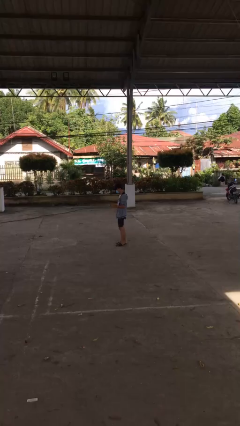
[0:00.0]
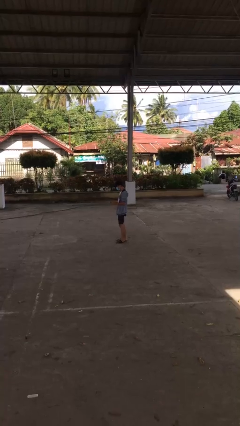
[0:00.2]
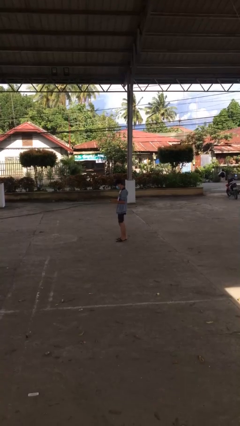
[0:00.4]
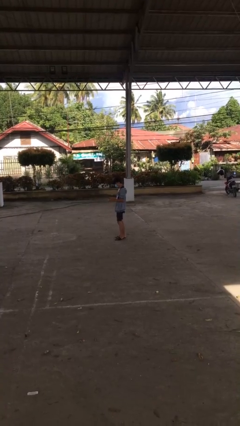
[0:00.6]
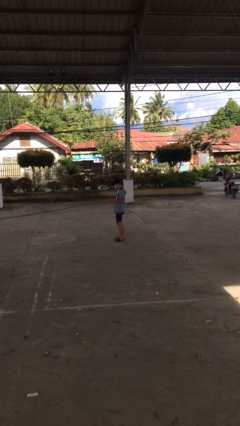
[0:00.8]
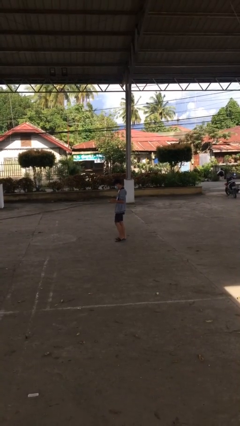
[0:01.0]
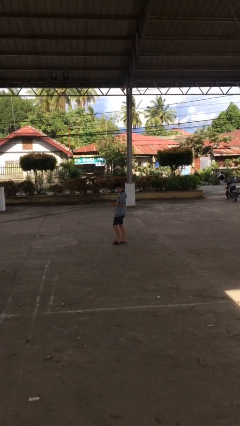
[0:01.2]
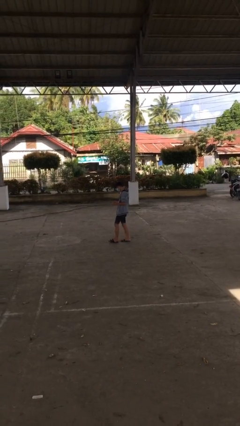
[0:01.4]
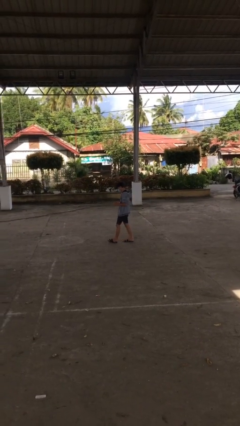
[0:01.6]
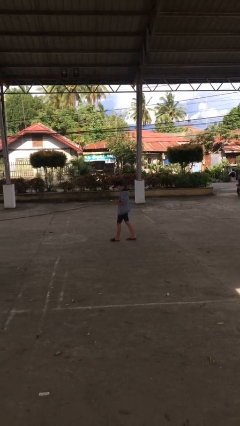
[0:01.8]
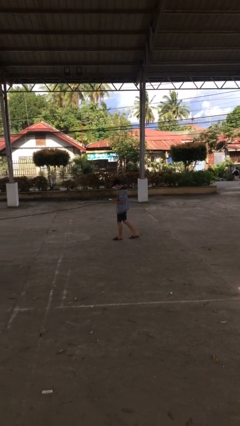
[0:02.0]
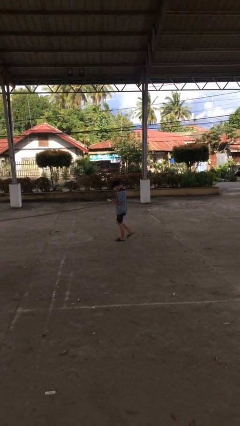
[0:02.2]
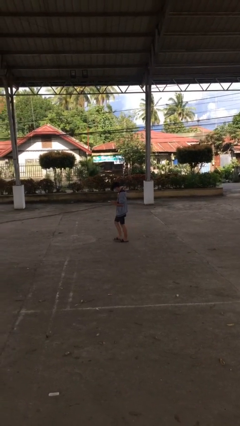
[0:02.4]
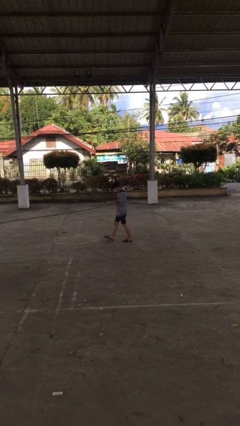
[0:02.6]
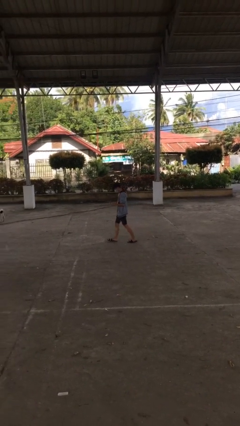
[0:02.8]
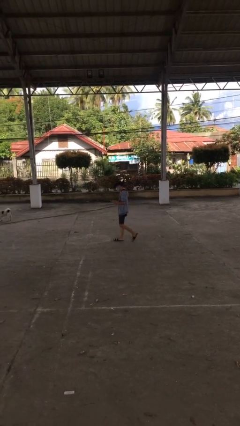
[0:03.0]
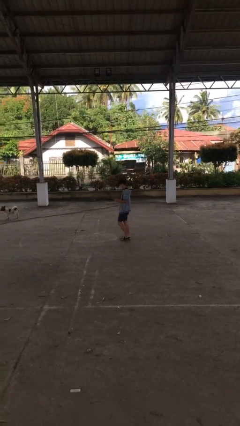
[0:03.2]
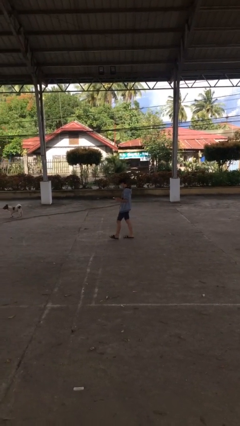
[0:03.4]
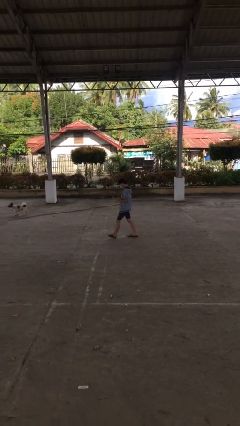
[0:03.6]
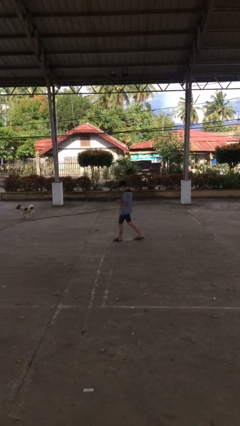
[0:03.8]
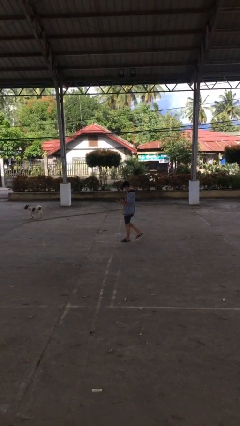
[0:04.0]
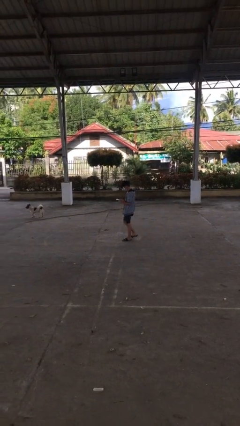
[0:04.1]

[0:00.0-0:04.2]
person texts on phone

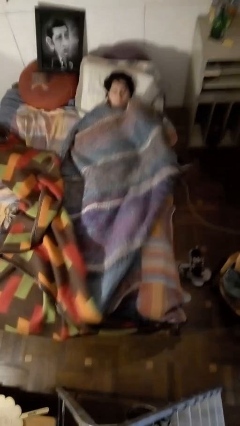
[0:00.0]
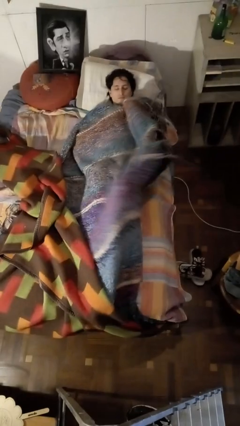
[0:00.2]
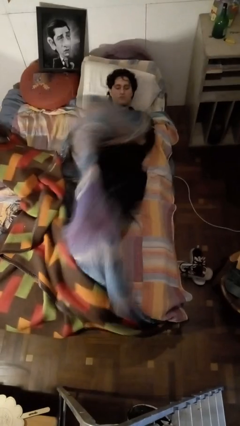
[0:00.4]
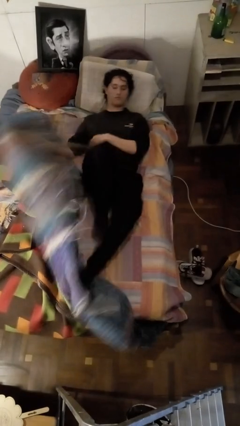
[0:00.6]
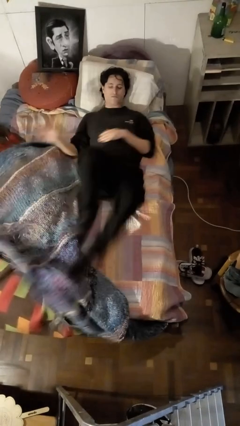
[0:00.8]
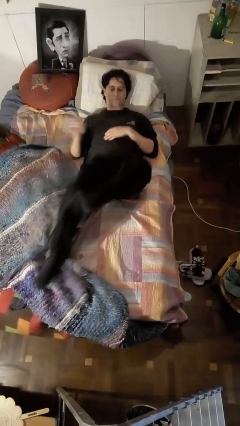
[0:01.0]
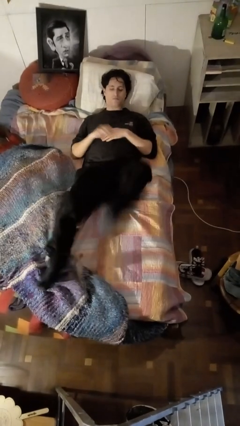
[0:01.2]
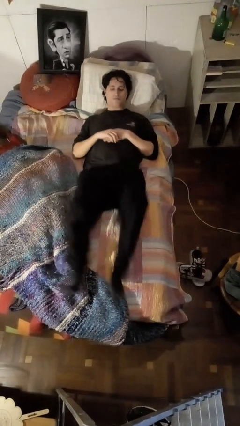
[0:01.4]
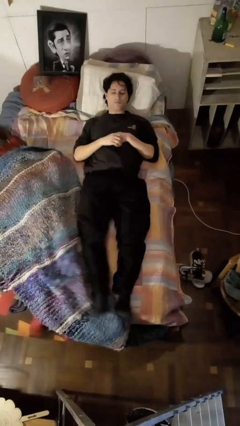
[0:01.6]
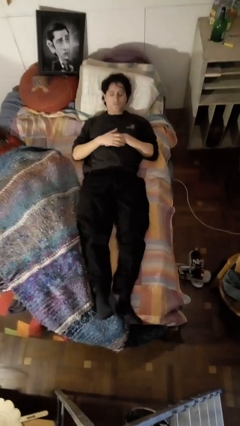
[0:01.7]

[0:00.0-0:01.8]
person uncovers with bedsheets

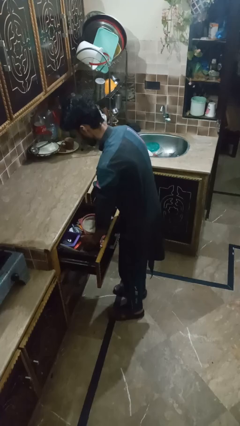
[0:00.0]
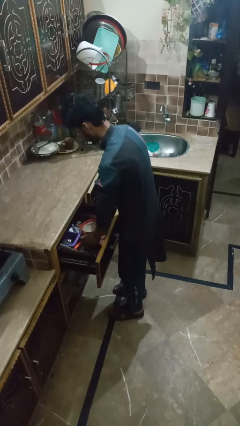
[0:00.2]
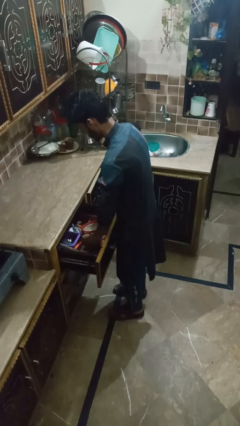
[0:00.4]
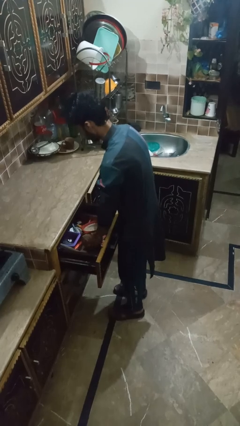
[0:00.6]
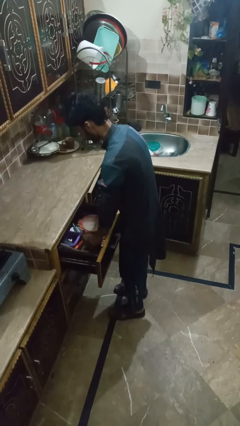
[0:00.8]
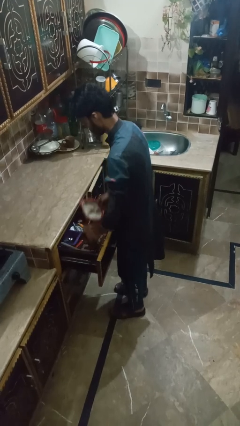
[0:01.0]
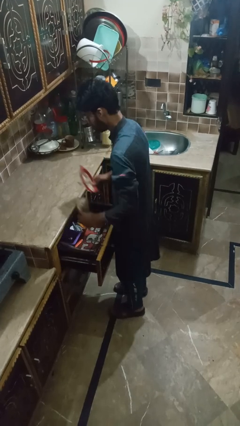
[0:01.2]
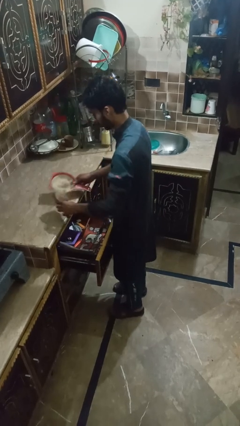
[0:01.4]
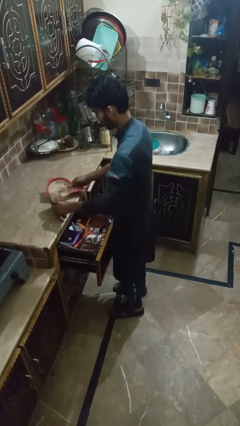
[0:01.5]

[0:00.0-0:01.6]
person takes object from kitchen drawer

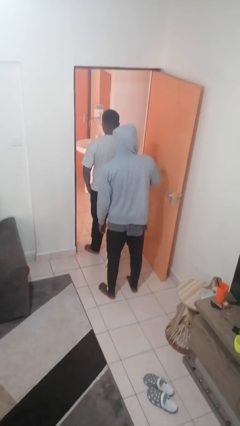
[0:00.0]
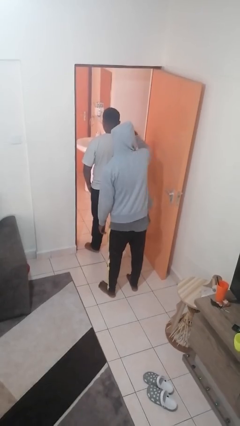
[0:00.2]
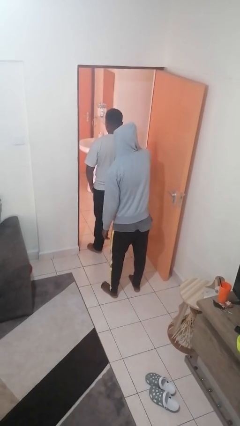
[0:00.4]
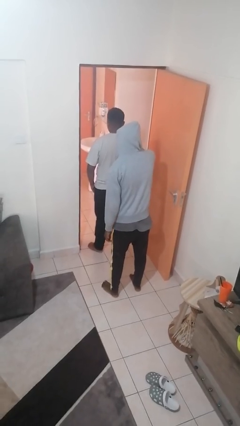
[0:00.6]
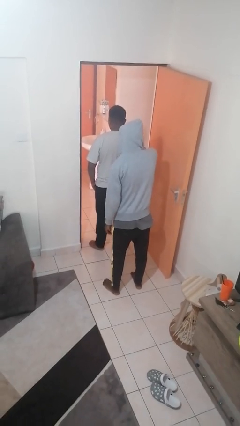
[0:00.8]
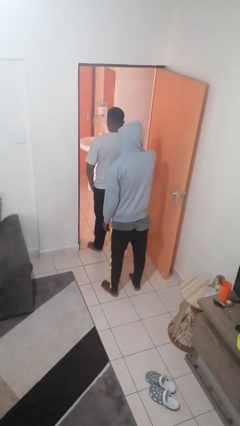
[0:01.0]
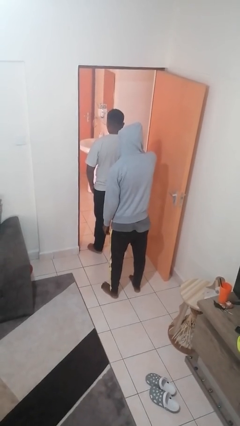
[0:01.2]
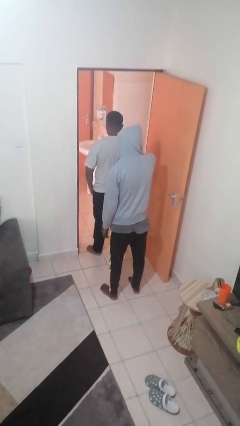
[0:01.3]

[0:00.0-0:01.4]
person grabs person by shoulder

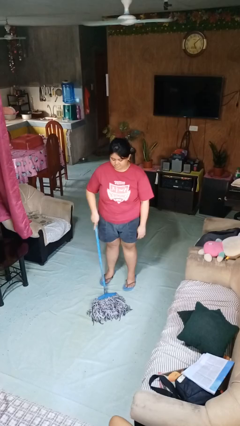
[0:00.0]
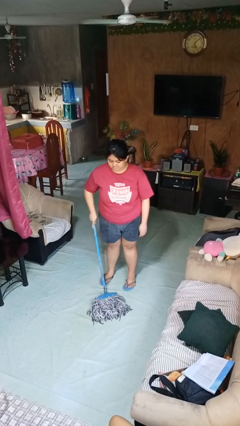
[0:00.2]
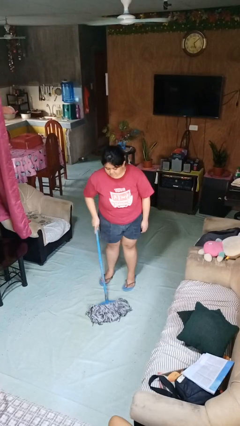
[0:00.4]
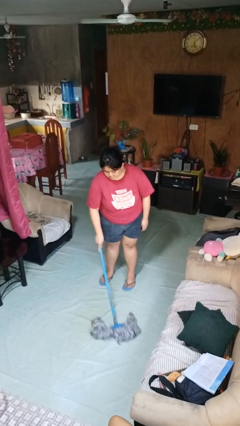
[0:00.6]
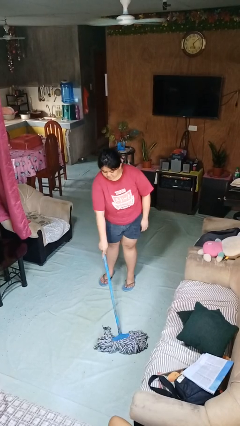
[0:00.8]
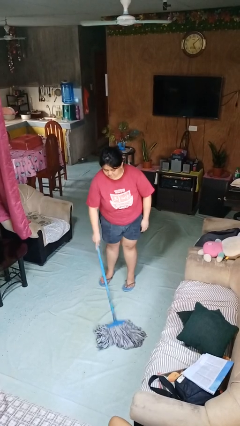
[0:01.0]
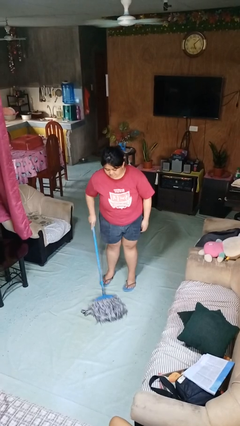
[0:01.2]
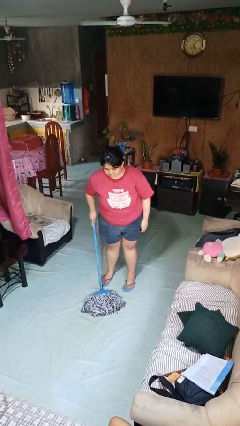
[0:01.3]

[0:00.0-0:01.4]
person mops

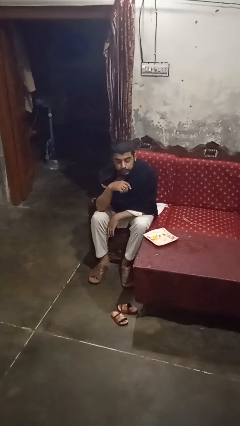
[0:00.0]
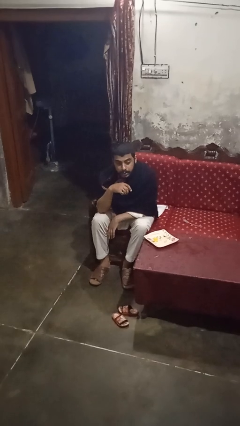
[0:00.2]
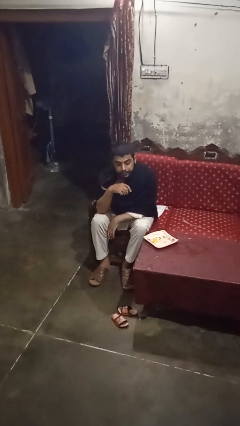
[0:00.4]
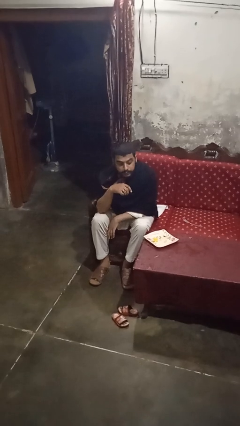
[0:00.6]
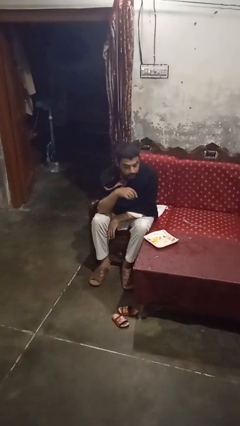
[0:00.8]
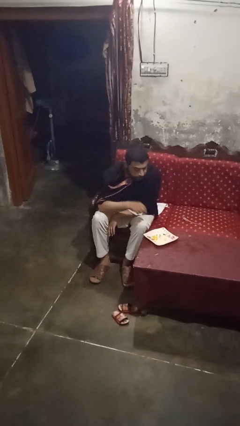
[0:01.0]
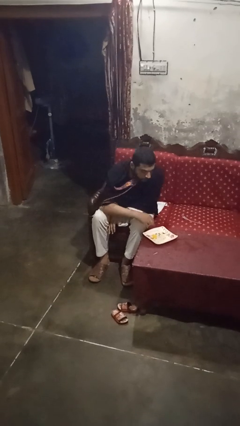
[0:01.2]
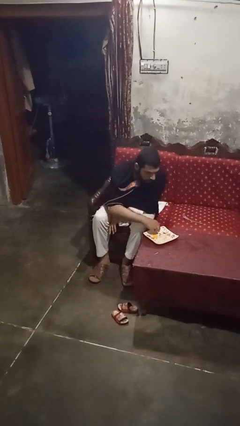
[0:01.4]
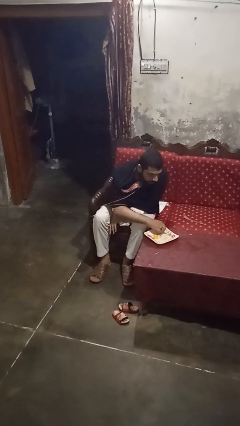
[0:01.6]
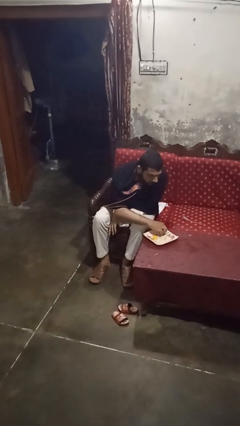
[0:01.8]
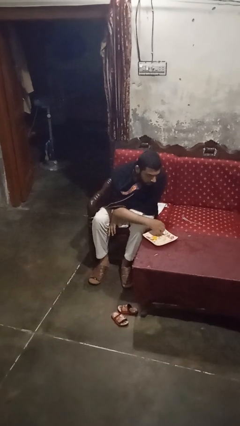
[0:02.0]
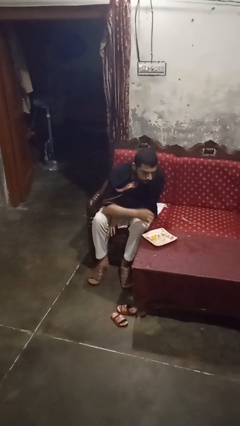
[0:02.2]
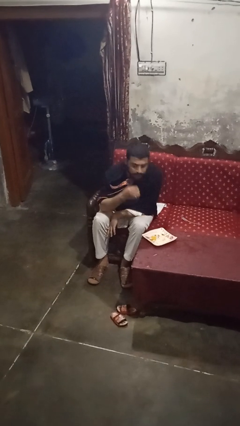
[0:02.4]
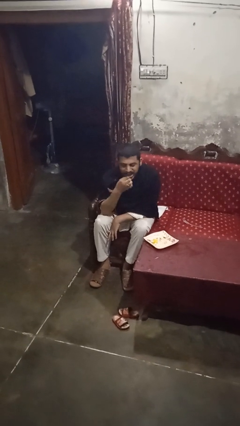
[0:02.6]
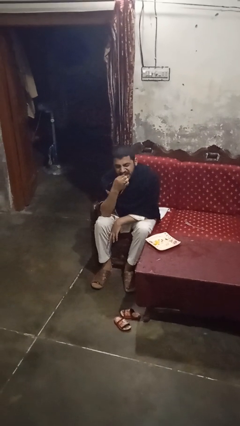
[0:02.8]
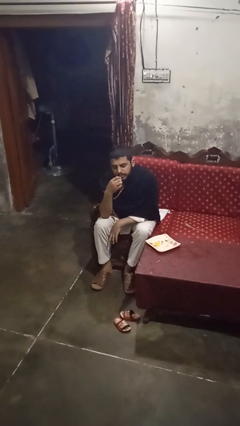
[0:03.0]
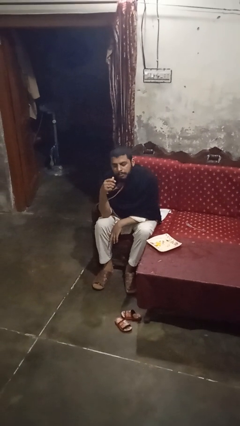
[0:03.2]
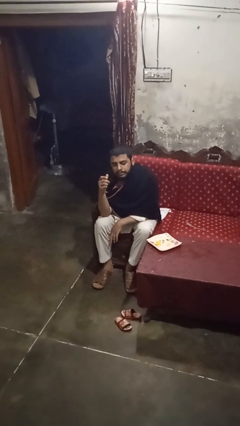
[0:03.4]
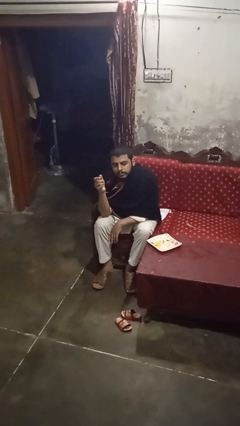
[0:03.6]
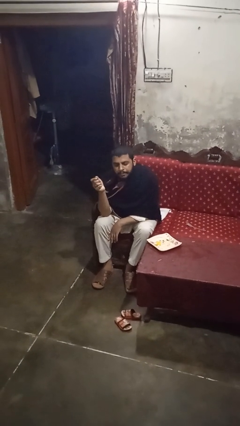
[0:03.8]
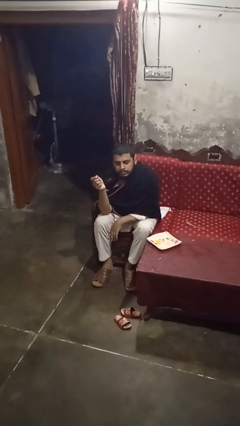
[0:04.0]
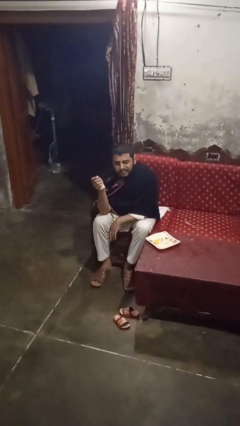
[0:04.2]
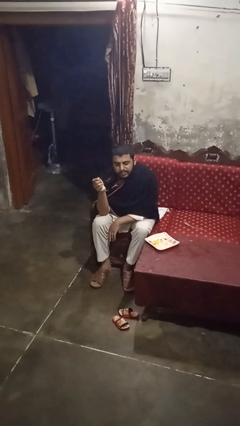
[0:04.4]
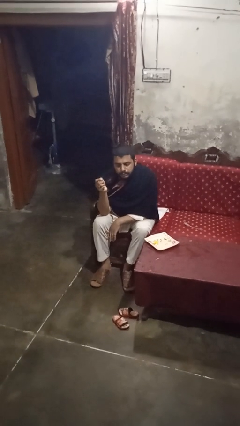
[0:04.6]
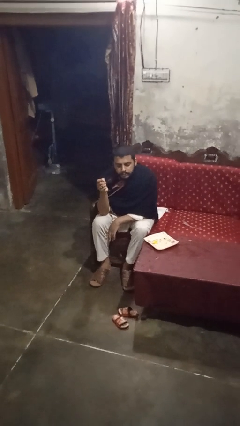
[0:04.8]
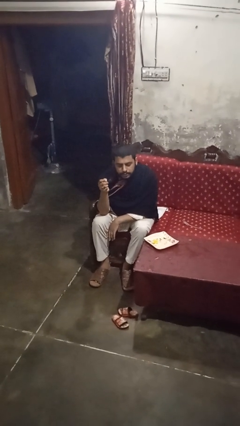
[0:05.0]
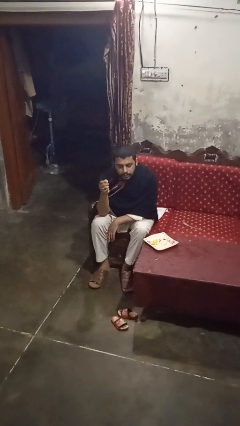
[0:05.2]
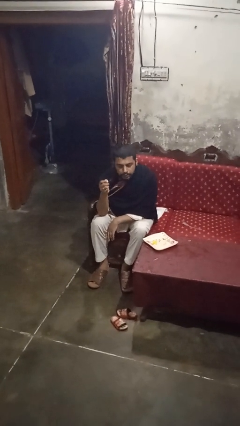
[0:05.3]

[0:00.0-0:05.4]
person eats with hands

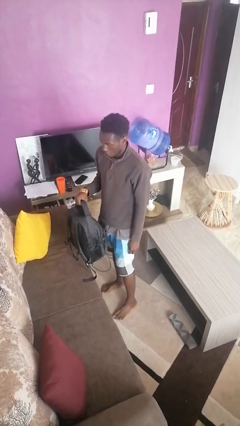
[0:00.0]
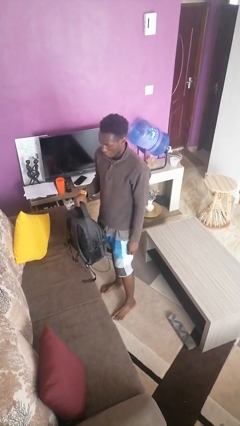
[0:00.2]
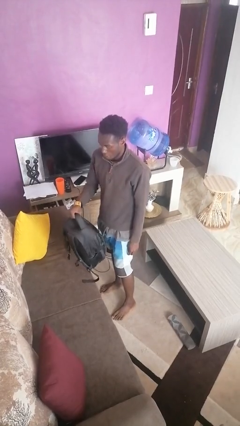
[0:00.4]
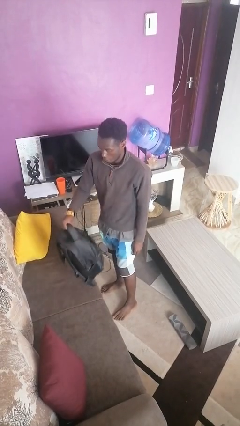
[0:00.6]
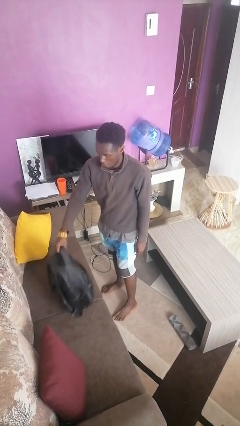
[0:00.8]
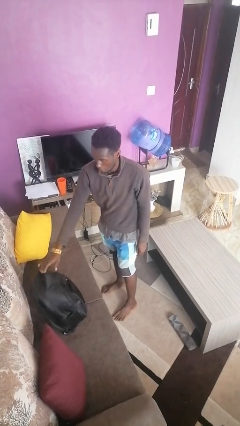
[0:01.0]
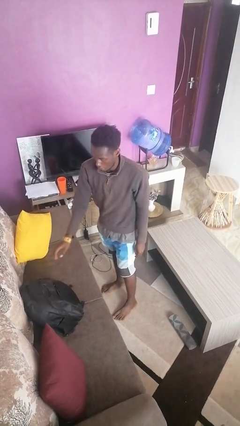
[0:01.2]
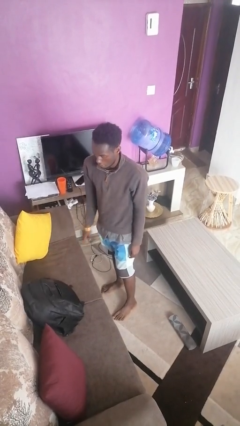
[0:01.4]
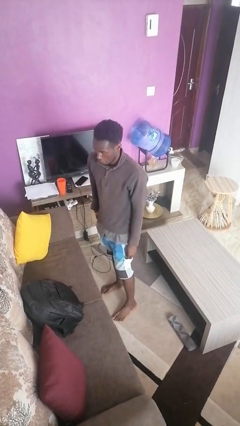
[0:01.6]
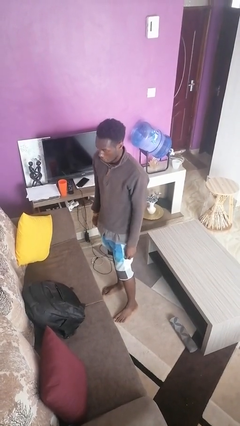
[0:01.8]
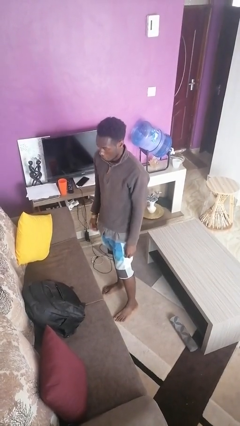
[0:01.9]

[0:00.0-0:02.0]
person puts down object on couch
